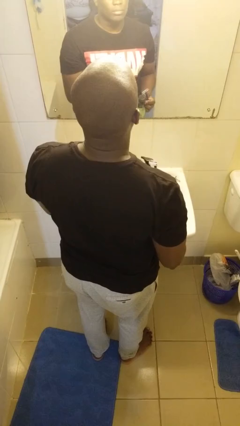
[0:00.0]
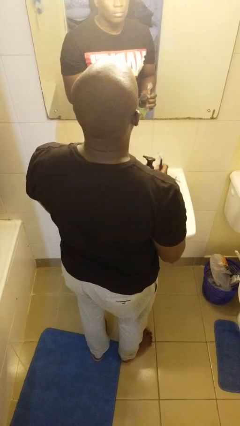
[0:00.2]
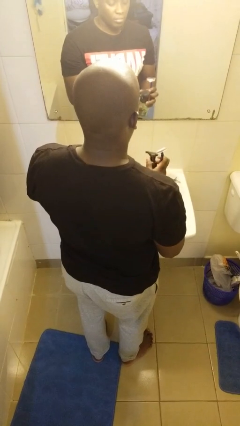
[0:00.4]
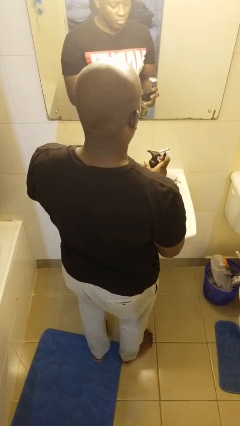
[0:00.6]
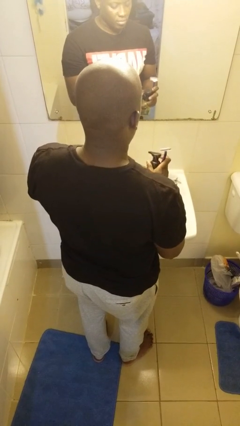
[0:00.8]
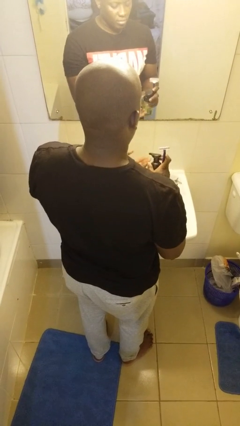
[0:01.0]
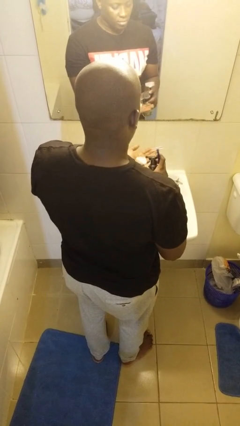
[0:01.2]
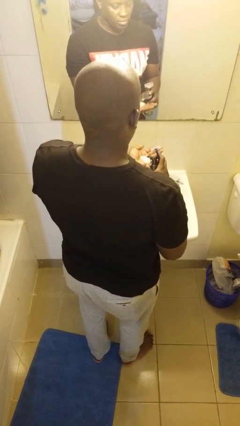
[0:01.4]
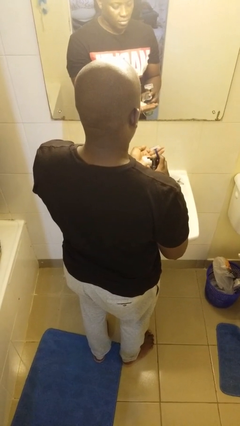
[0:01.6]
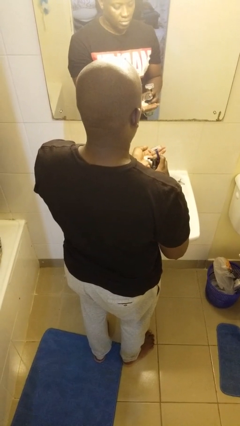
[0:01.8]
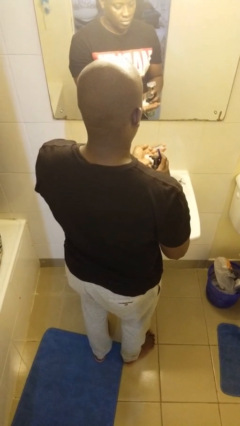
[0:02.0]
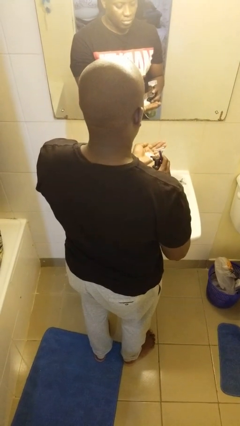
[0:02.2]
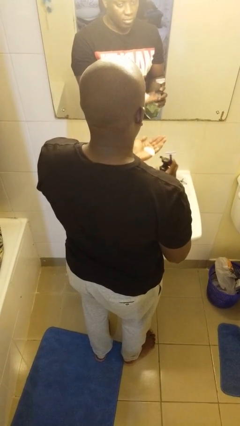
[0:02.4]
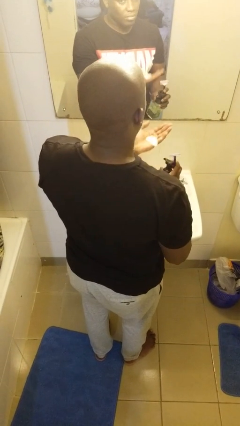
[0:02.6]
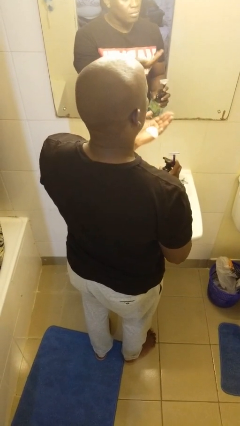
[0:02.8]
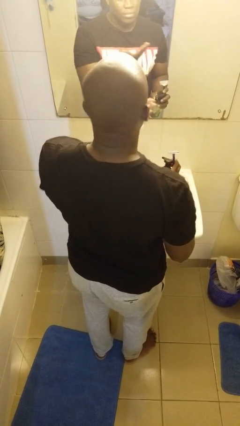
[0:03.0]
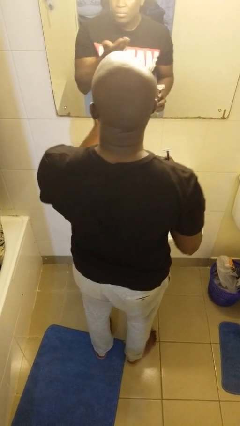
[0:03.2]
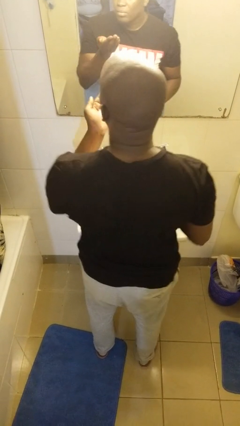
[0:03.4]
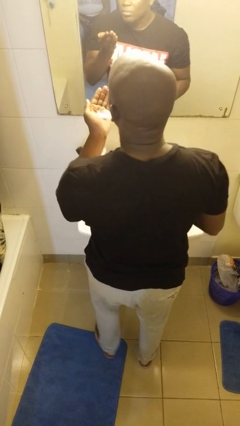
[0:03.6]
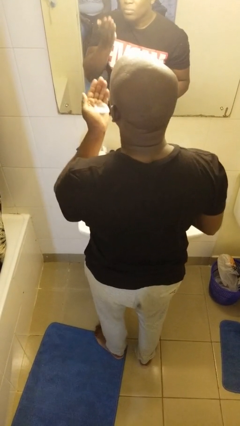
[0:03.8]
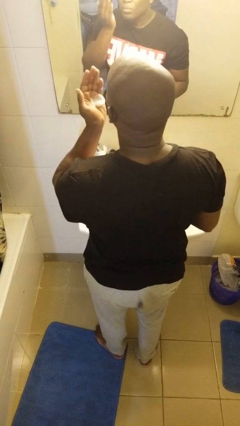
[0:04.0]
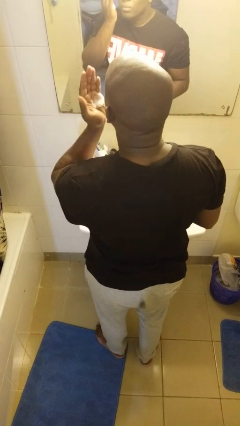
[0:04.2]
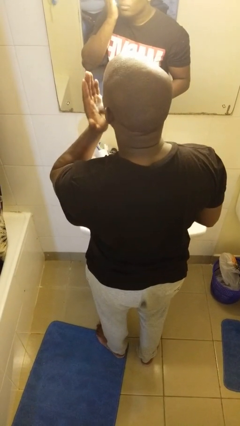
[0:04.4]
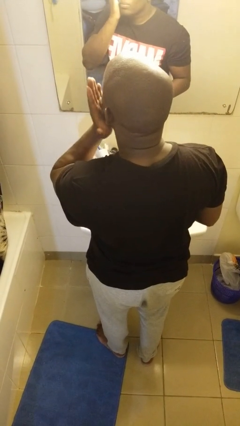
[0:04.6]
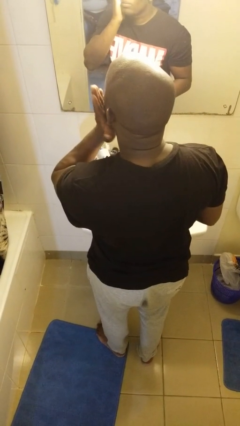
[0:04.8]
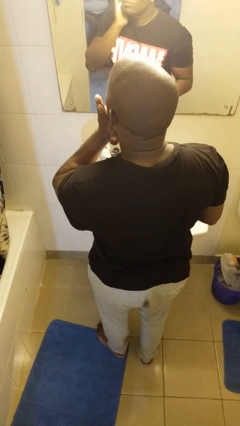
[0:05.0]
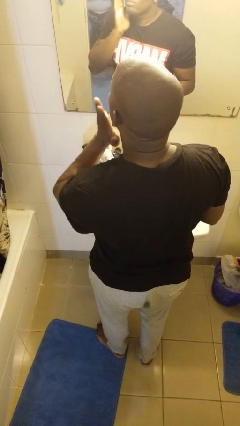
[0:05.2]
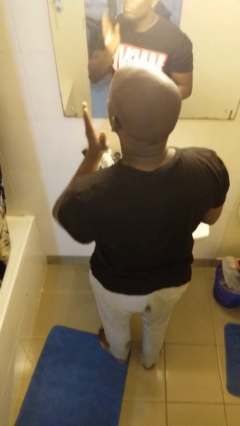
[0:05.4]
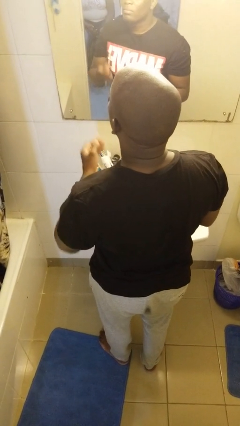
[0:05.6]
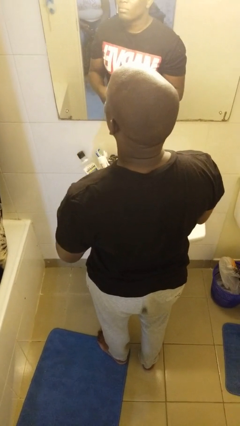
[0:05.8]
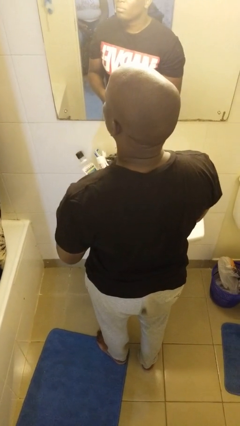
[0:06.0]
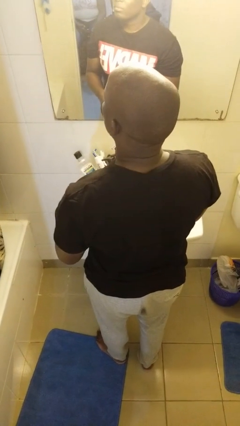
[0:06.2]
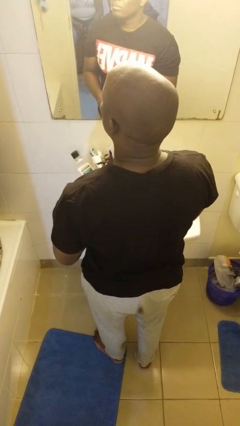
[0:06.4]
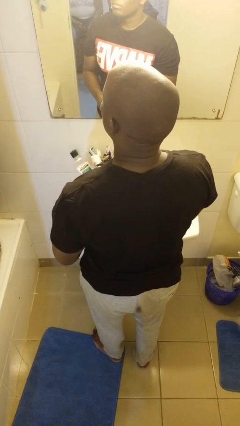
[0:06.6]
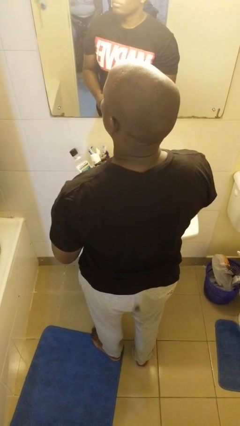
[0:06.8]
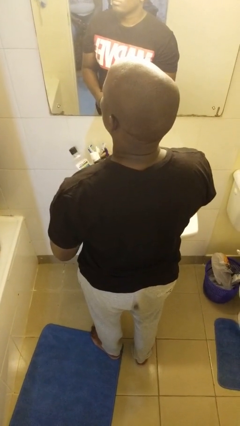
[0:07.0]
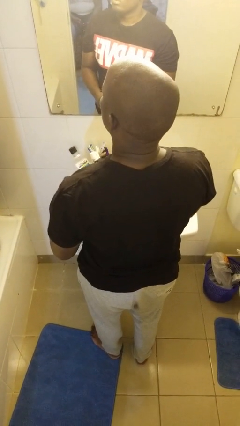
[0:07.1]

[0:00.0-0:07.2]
person applies shaving cream

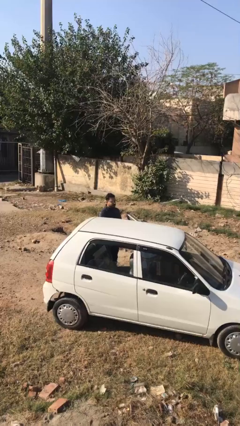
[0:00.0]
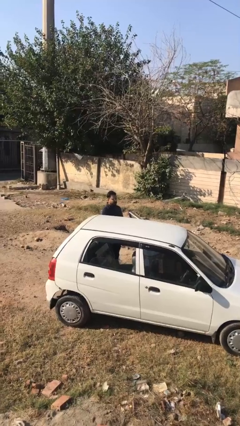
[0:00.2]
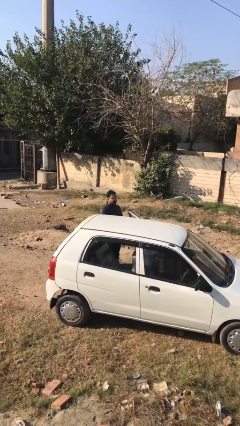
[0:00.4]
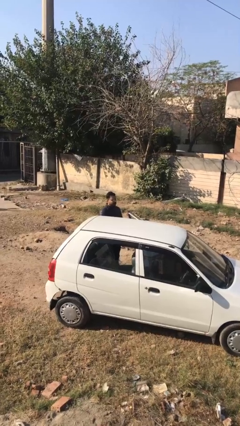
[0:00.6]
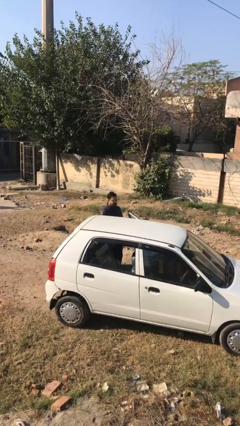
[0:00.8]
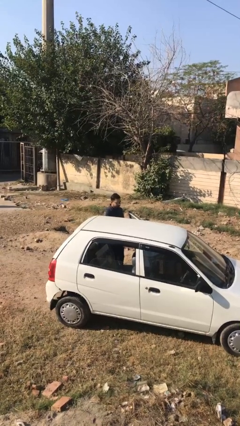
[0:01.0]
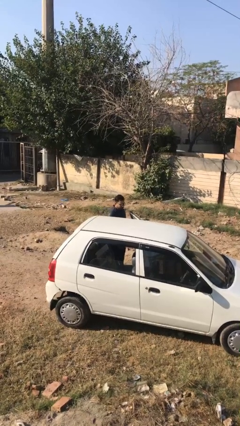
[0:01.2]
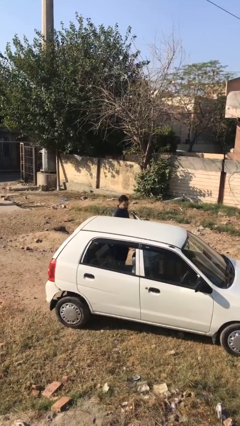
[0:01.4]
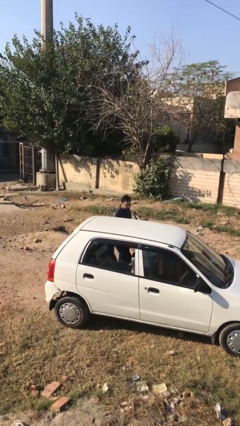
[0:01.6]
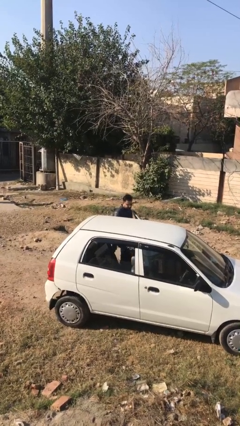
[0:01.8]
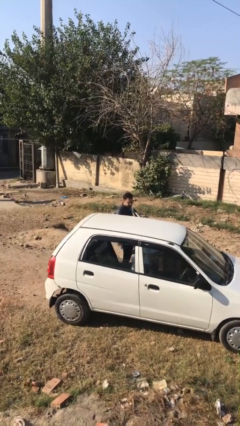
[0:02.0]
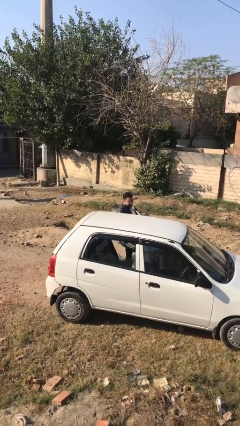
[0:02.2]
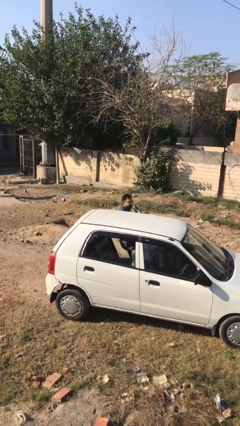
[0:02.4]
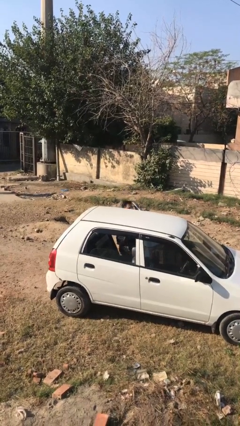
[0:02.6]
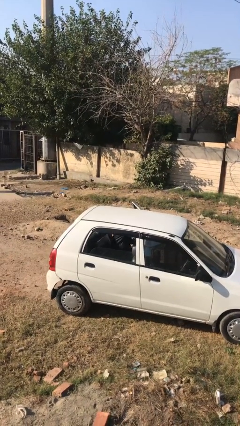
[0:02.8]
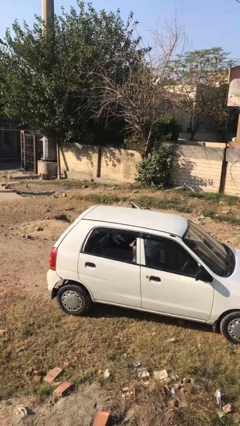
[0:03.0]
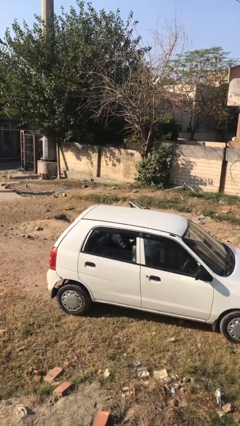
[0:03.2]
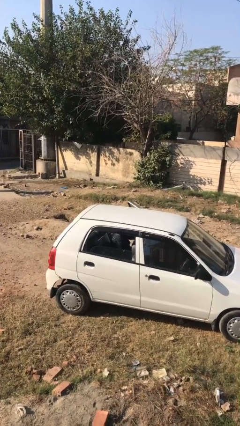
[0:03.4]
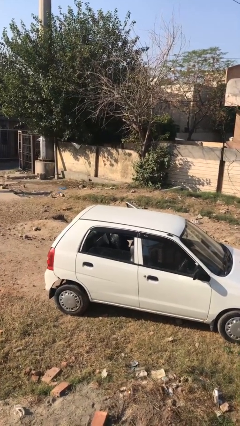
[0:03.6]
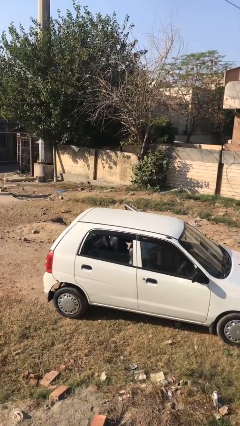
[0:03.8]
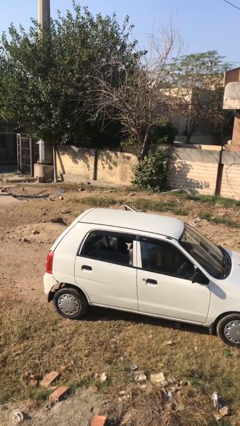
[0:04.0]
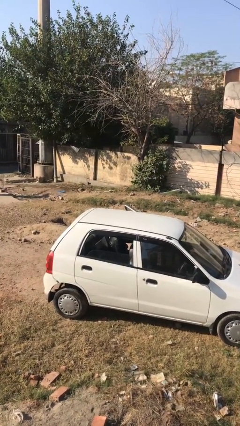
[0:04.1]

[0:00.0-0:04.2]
person enters car

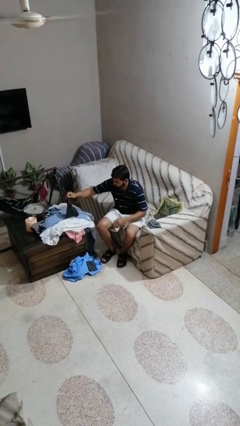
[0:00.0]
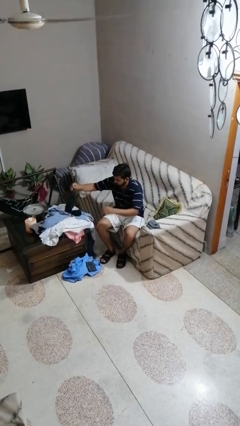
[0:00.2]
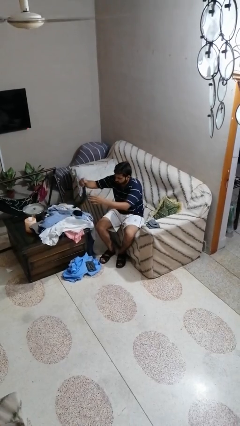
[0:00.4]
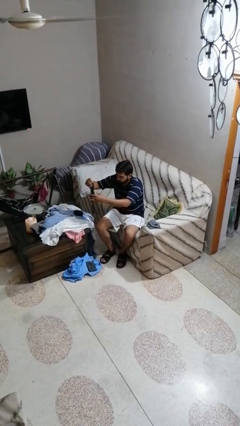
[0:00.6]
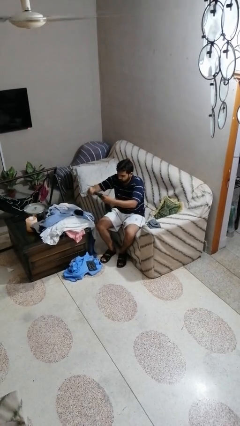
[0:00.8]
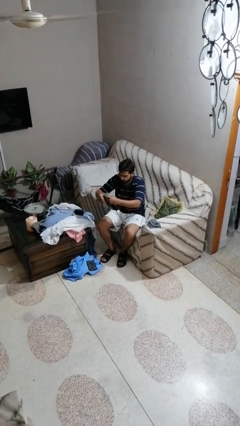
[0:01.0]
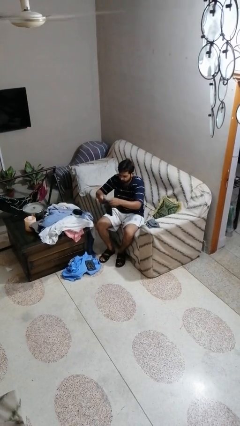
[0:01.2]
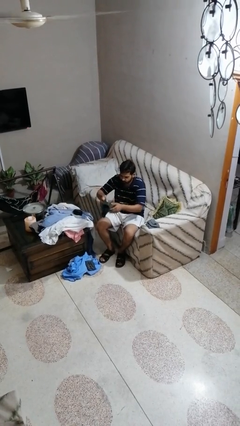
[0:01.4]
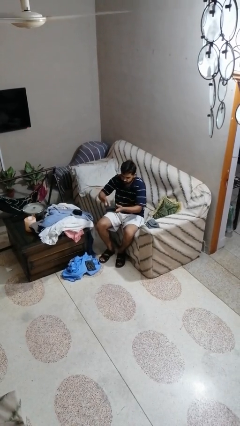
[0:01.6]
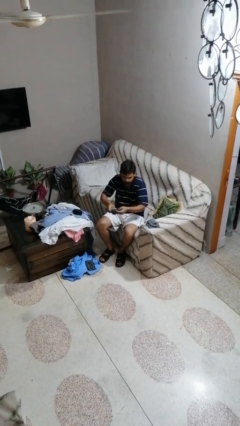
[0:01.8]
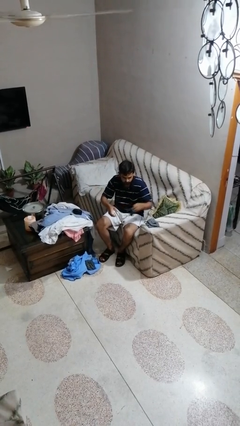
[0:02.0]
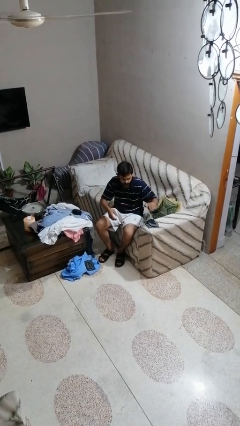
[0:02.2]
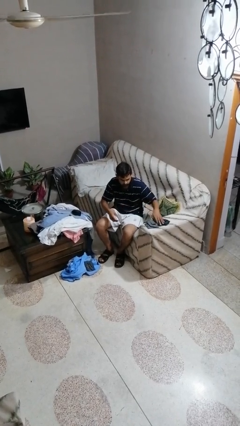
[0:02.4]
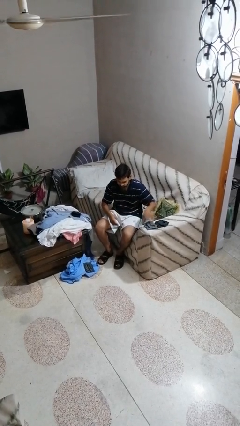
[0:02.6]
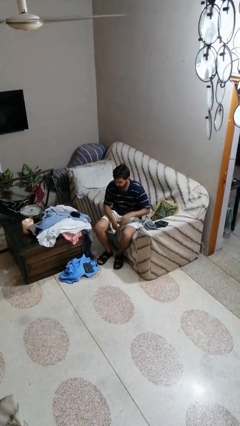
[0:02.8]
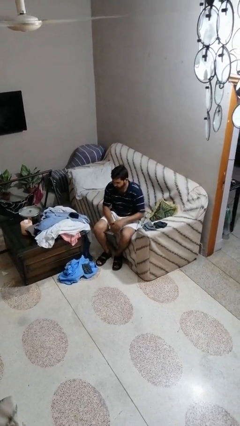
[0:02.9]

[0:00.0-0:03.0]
person folds socks

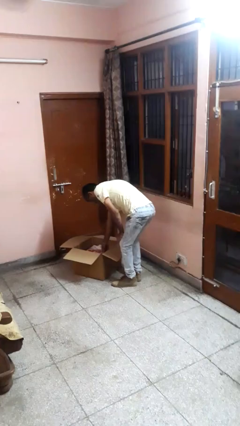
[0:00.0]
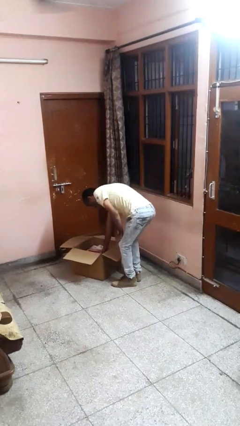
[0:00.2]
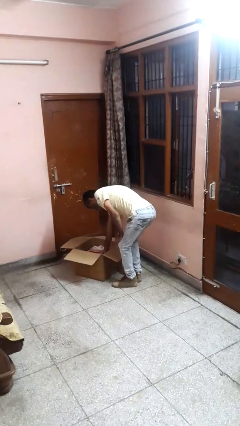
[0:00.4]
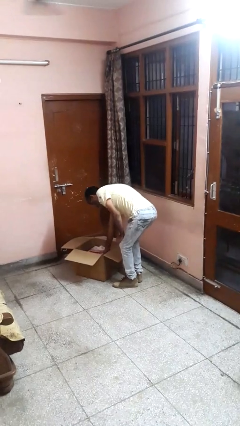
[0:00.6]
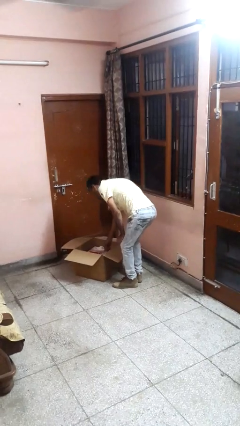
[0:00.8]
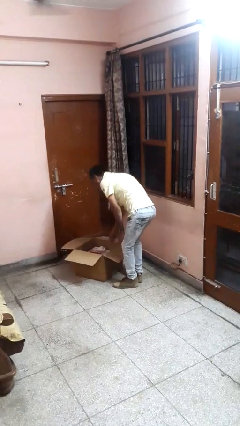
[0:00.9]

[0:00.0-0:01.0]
person puts object into box

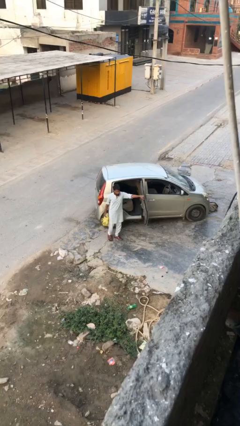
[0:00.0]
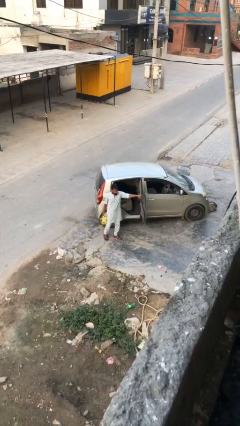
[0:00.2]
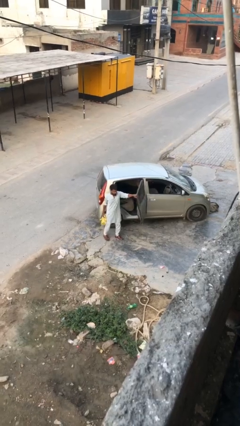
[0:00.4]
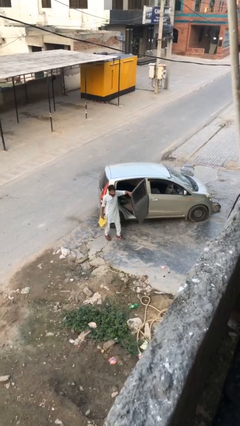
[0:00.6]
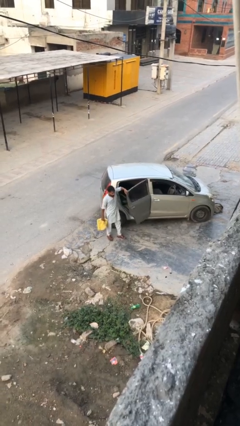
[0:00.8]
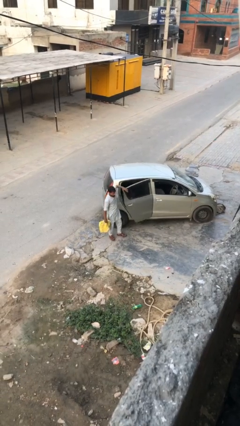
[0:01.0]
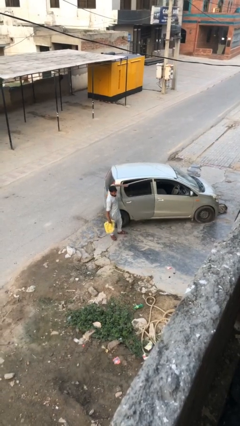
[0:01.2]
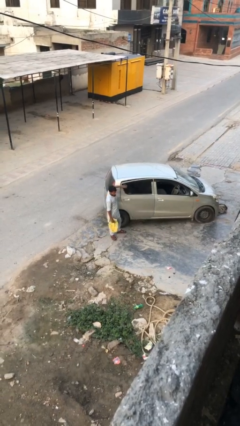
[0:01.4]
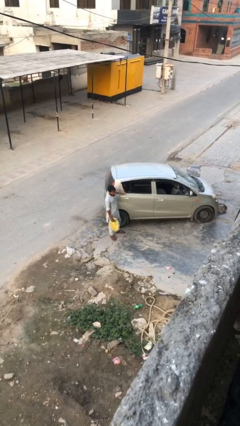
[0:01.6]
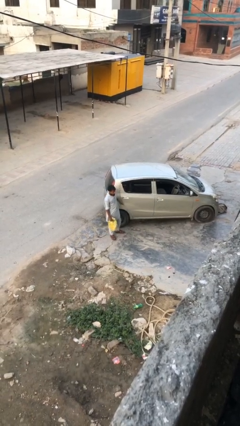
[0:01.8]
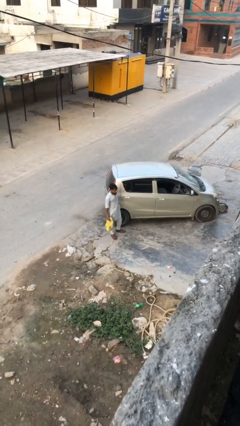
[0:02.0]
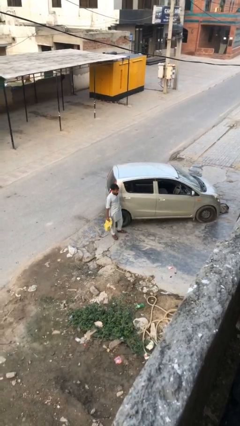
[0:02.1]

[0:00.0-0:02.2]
person closes car door

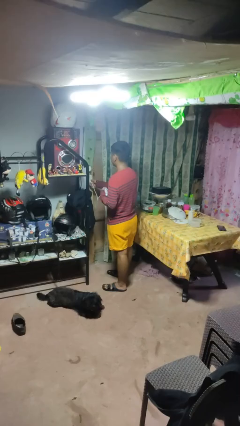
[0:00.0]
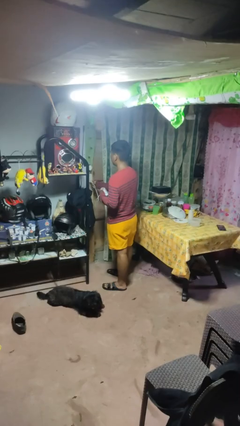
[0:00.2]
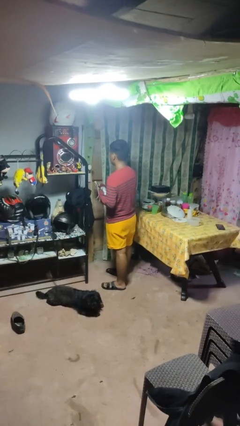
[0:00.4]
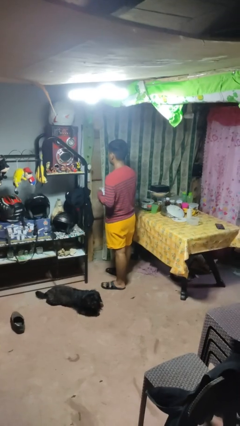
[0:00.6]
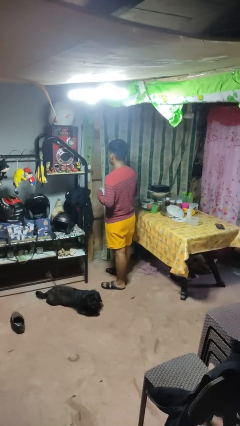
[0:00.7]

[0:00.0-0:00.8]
person unplugs from electrical socket
